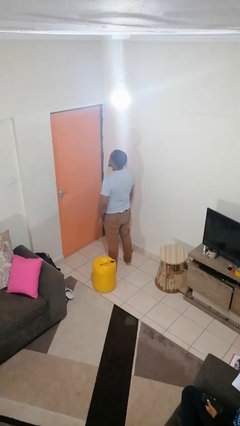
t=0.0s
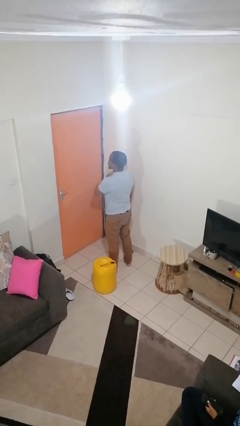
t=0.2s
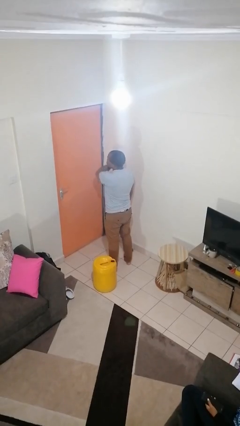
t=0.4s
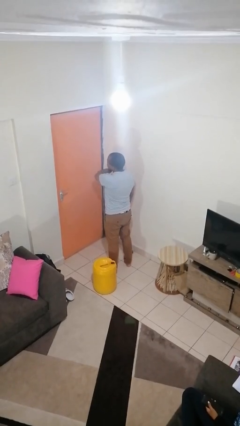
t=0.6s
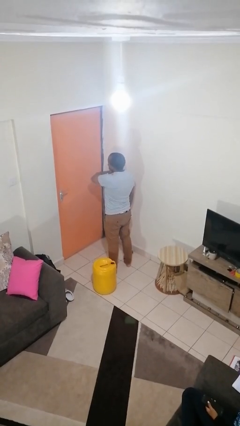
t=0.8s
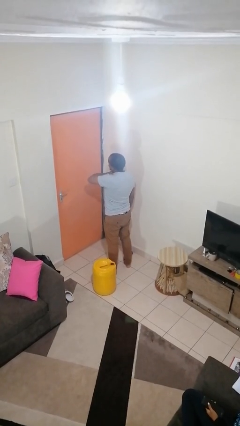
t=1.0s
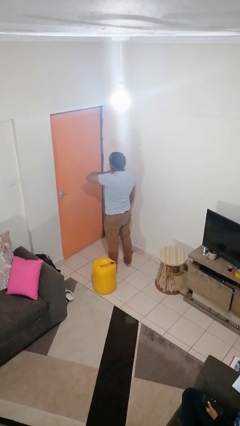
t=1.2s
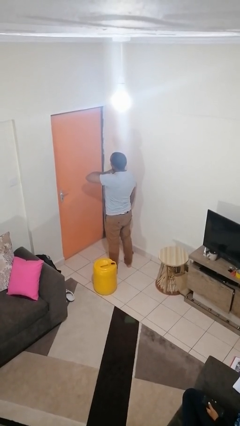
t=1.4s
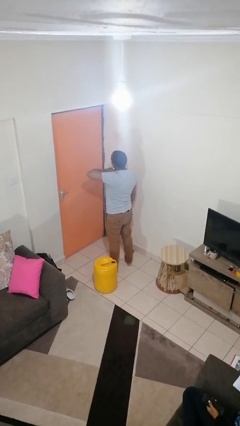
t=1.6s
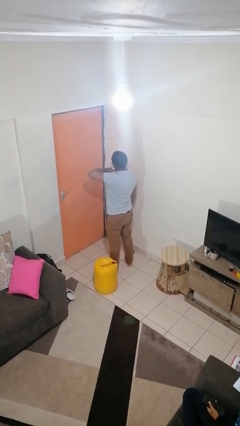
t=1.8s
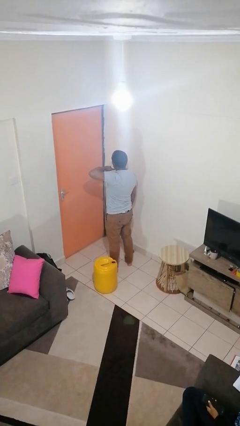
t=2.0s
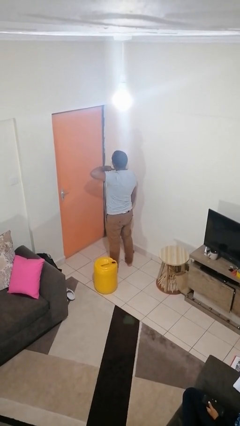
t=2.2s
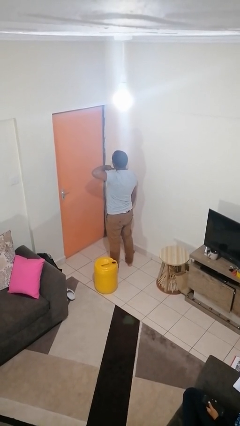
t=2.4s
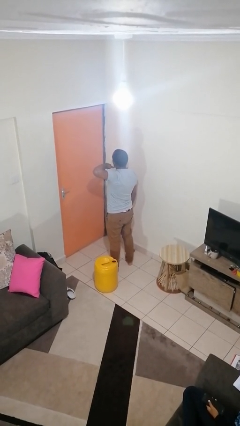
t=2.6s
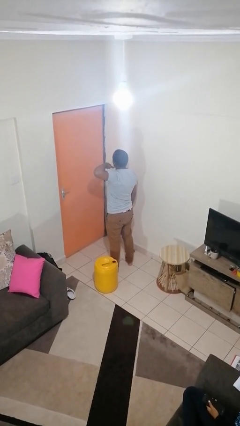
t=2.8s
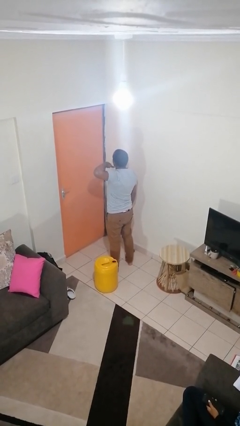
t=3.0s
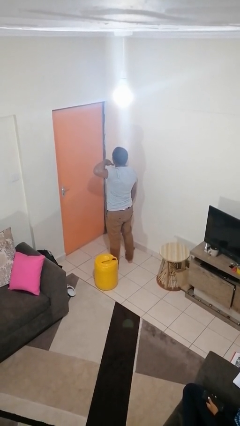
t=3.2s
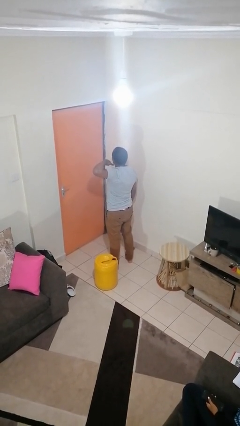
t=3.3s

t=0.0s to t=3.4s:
person gestures cut

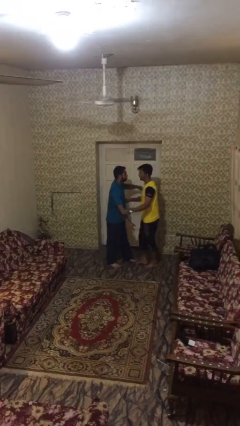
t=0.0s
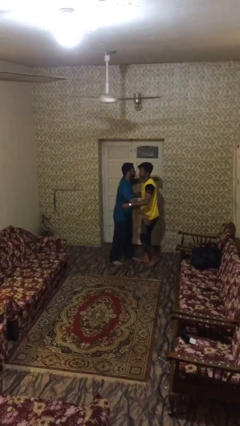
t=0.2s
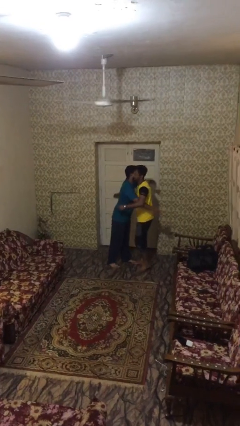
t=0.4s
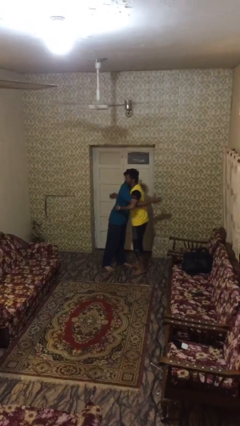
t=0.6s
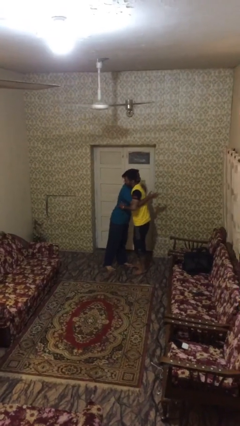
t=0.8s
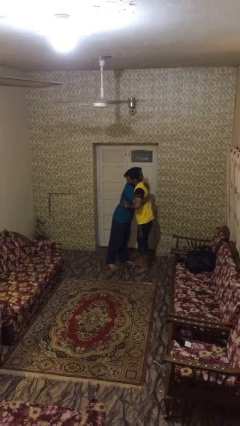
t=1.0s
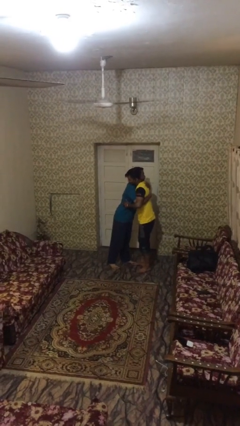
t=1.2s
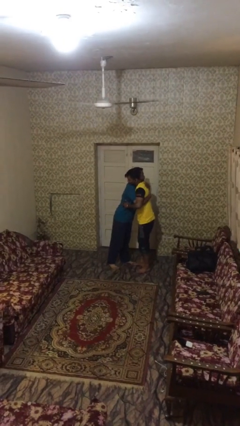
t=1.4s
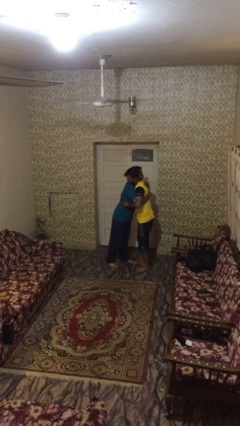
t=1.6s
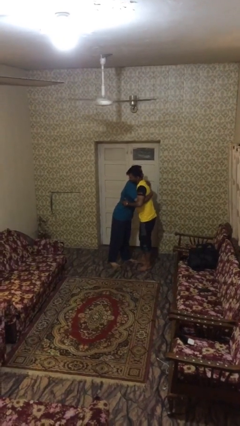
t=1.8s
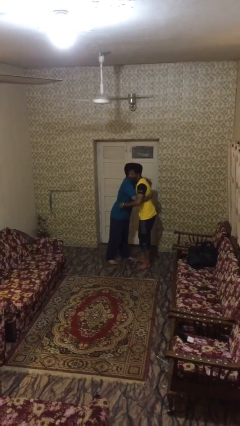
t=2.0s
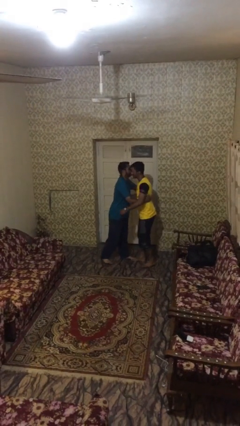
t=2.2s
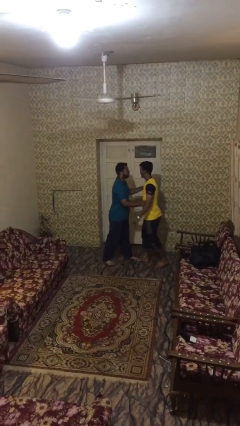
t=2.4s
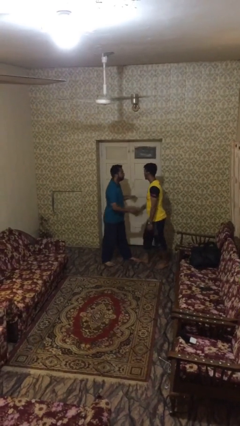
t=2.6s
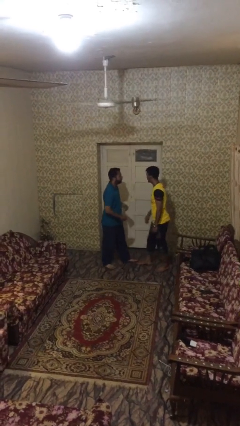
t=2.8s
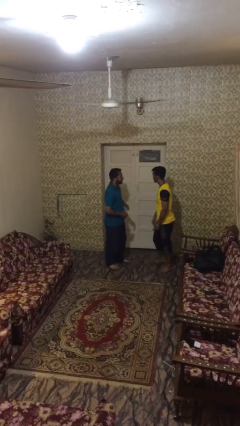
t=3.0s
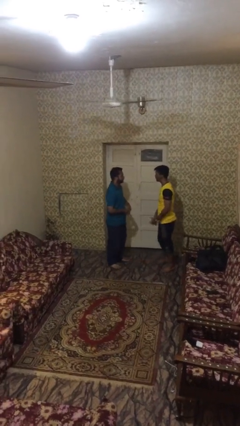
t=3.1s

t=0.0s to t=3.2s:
person embraces person

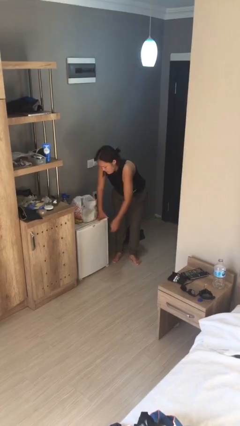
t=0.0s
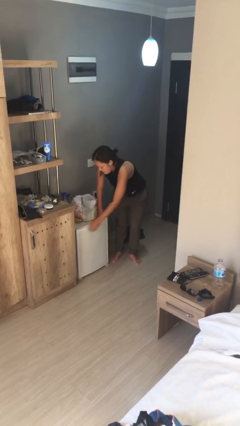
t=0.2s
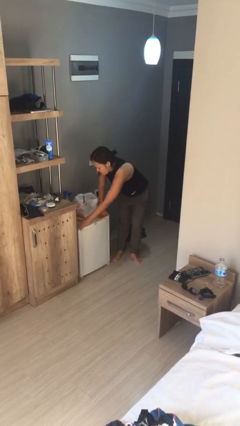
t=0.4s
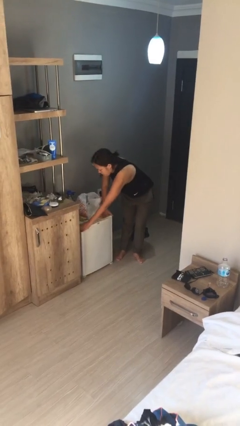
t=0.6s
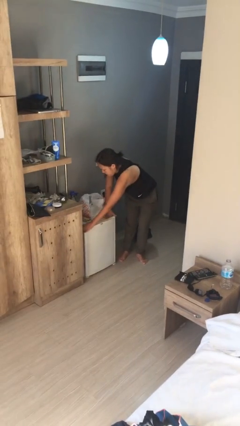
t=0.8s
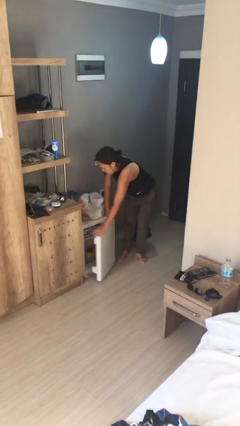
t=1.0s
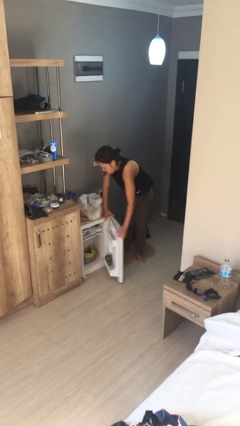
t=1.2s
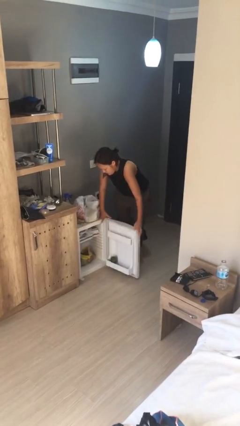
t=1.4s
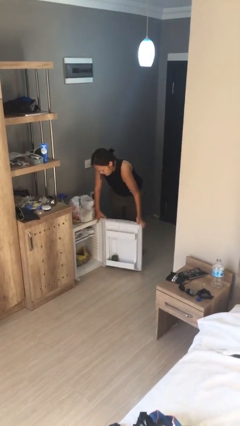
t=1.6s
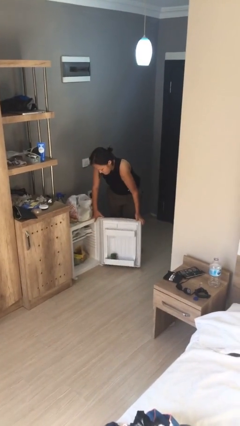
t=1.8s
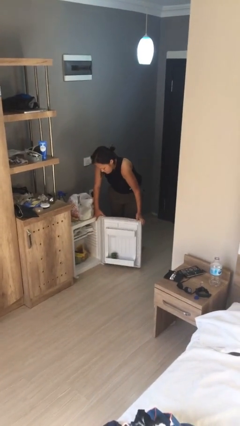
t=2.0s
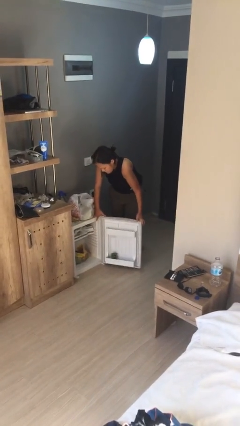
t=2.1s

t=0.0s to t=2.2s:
person opens refrigerator

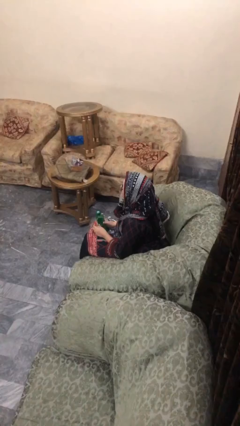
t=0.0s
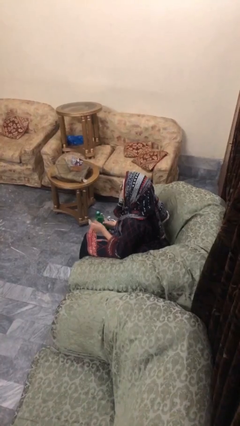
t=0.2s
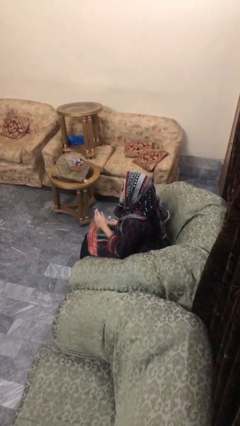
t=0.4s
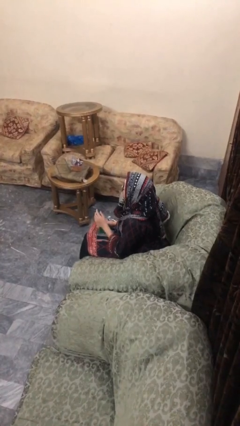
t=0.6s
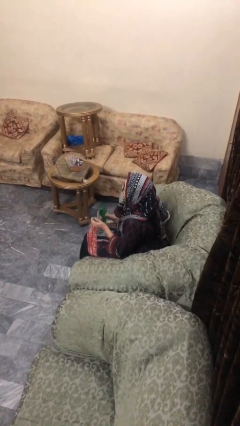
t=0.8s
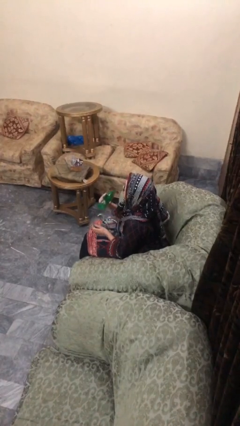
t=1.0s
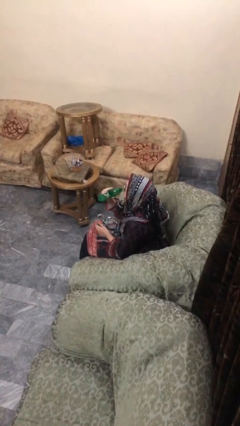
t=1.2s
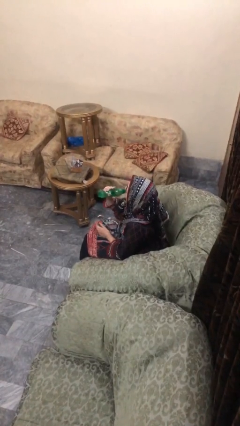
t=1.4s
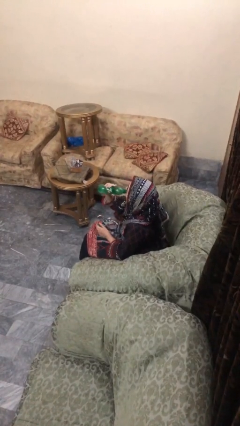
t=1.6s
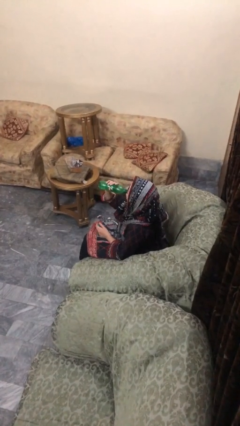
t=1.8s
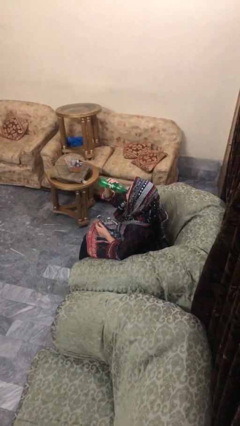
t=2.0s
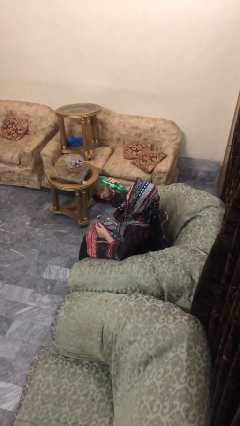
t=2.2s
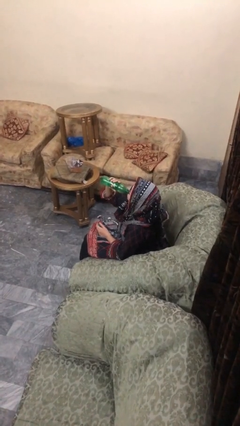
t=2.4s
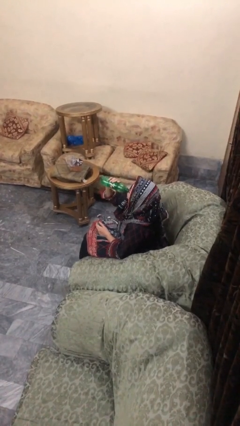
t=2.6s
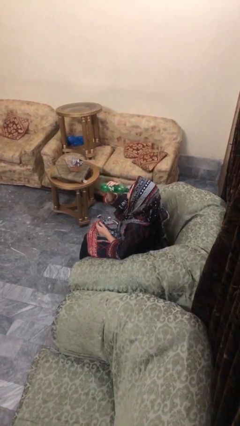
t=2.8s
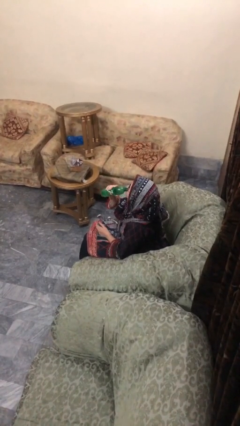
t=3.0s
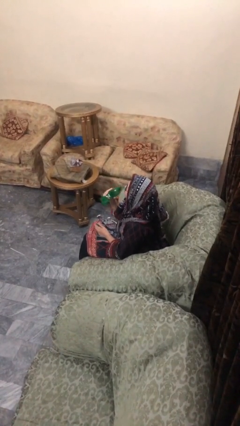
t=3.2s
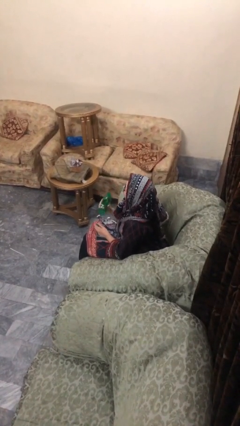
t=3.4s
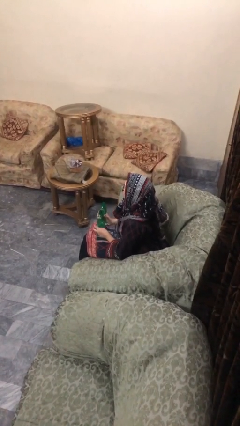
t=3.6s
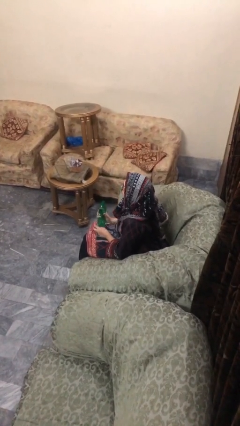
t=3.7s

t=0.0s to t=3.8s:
person drinks from bottle

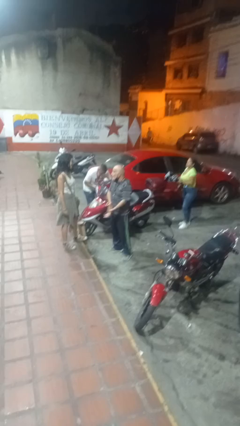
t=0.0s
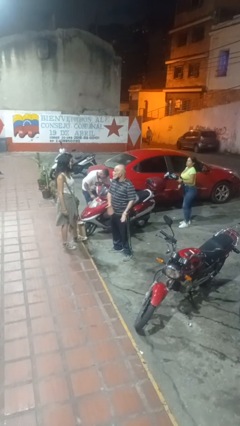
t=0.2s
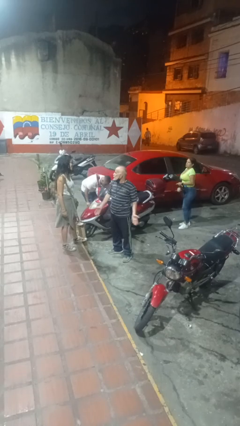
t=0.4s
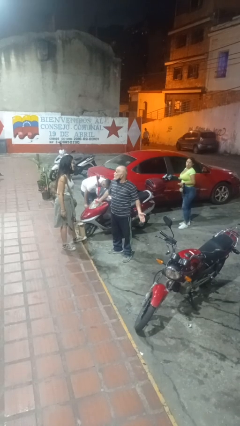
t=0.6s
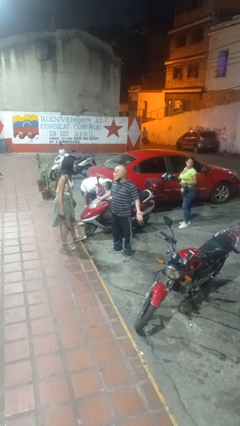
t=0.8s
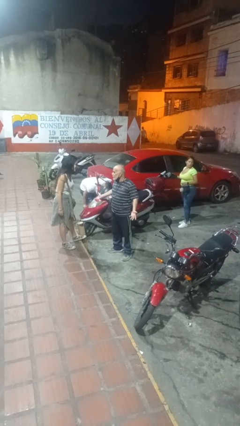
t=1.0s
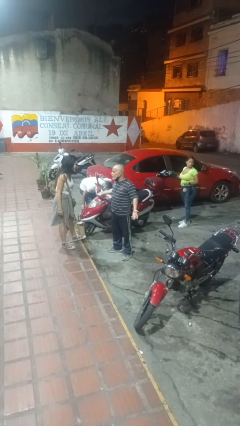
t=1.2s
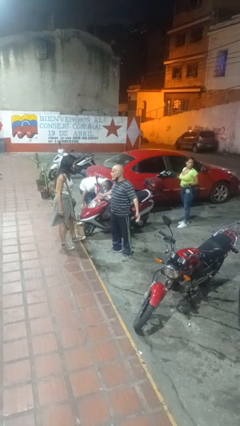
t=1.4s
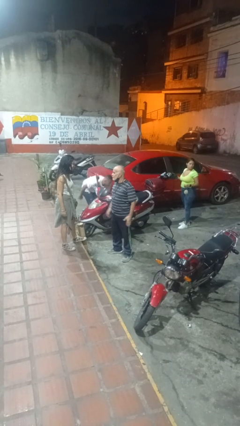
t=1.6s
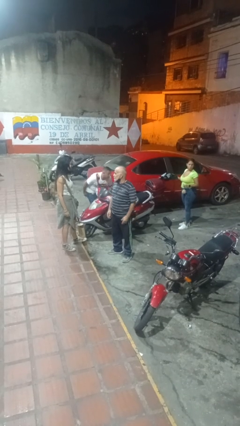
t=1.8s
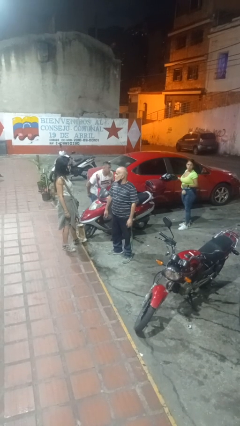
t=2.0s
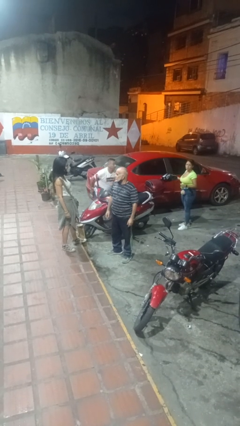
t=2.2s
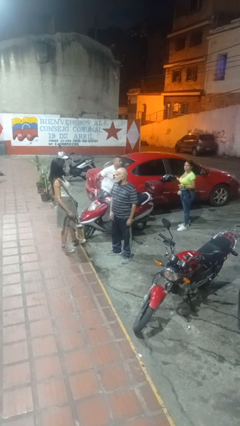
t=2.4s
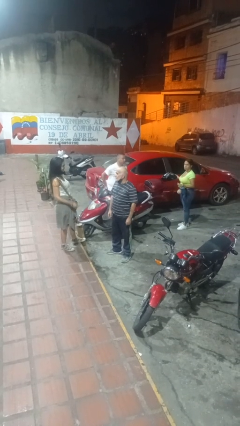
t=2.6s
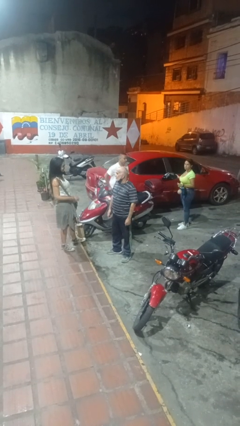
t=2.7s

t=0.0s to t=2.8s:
person talks to person

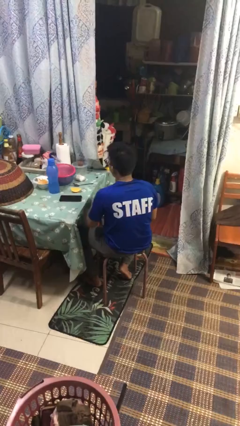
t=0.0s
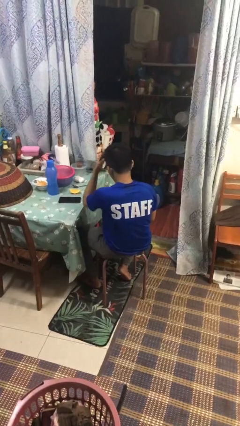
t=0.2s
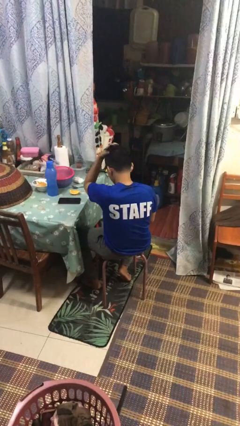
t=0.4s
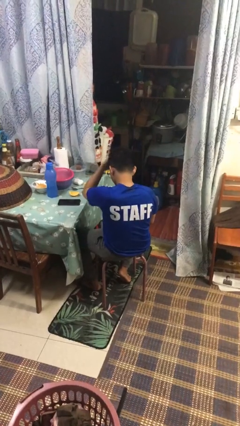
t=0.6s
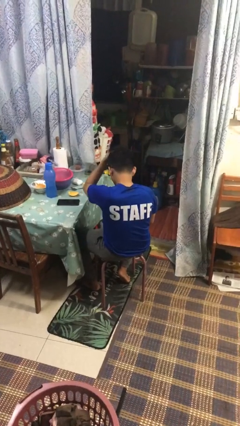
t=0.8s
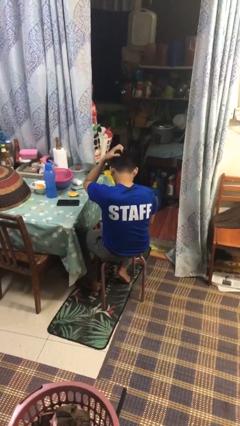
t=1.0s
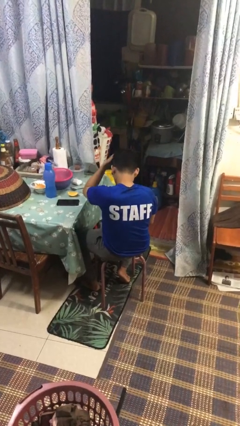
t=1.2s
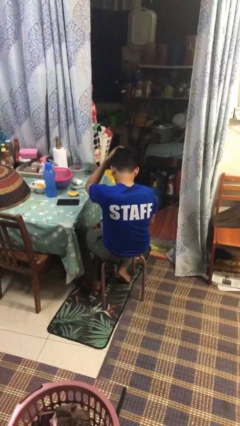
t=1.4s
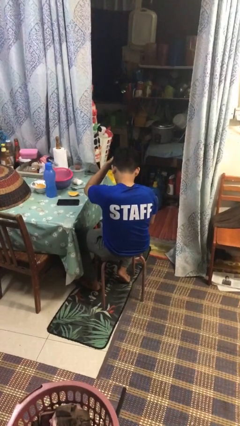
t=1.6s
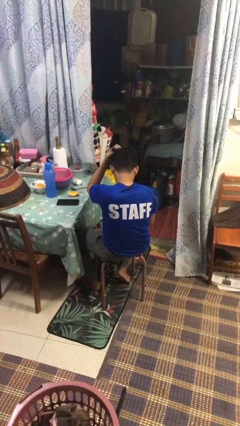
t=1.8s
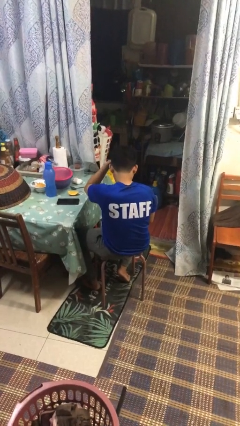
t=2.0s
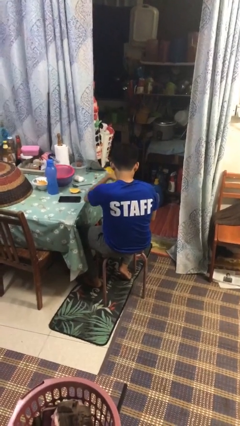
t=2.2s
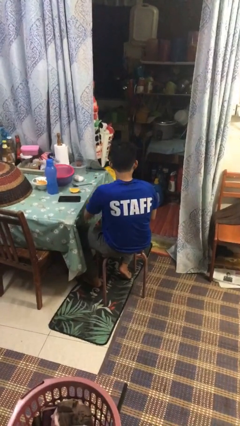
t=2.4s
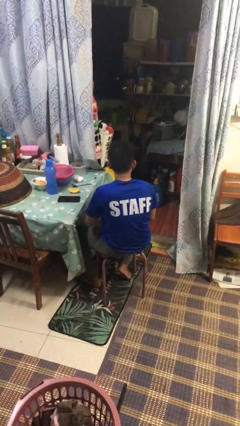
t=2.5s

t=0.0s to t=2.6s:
person scratches face
